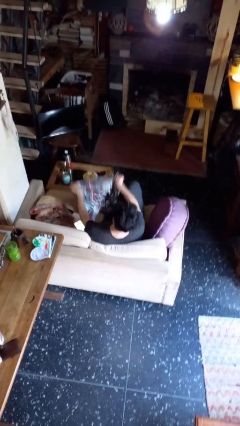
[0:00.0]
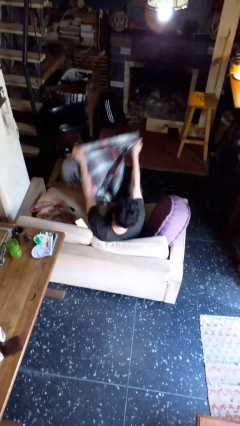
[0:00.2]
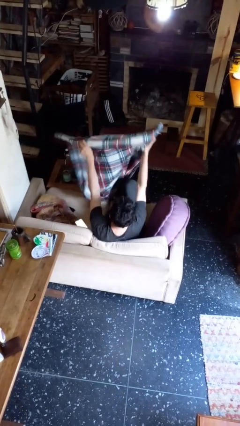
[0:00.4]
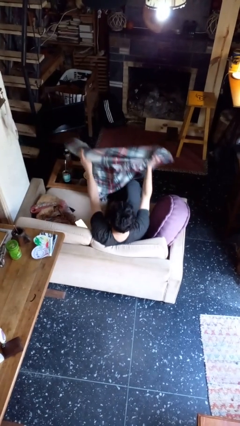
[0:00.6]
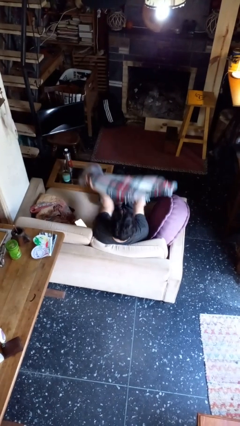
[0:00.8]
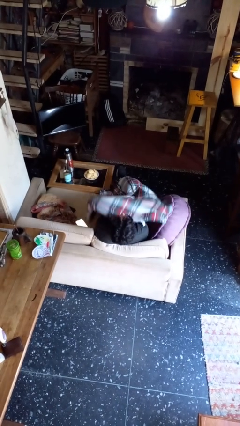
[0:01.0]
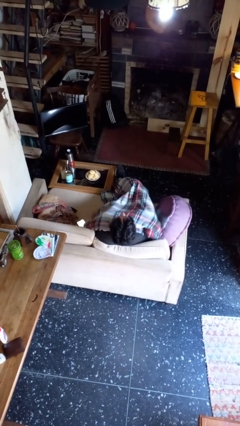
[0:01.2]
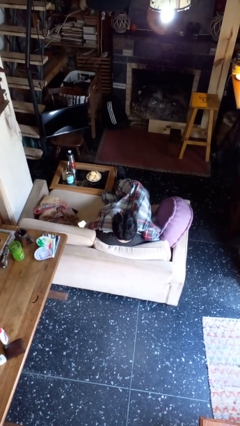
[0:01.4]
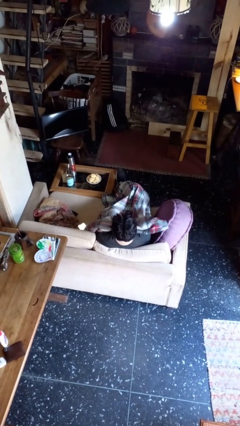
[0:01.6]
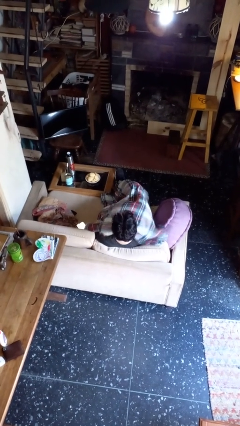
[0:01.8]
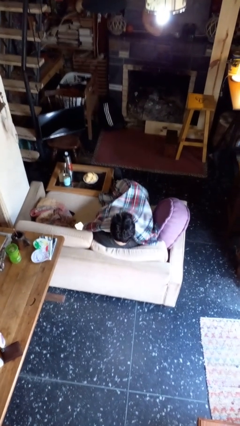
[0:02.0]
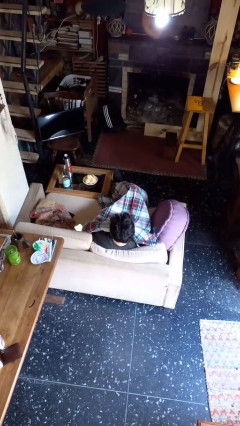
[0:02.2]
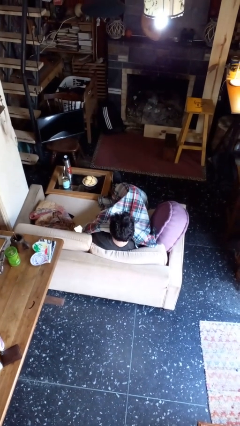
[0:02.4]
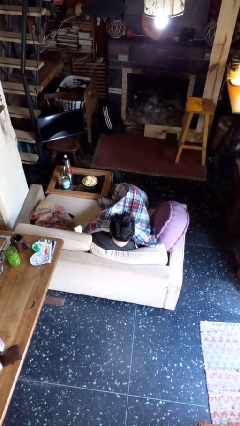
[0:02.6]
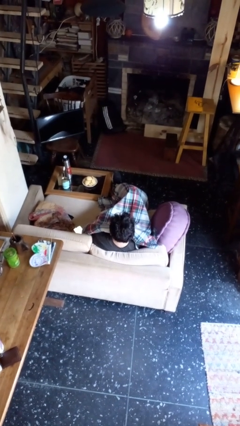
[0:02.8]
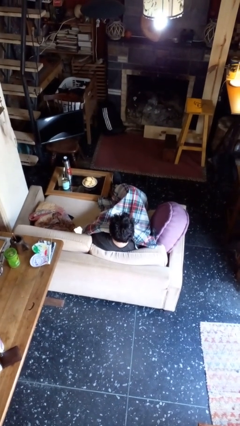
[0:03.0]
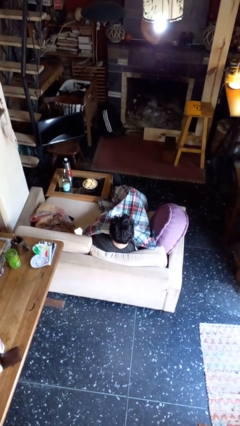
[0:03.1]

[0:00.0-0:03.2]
person covers with blanket

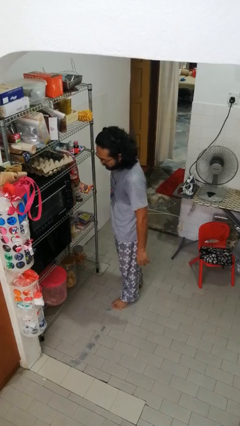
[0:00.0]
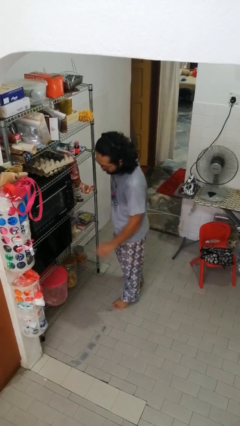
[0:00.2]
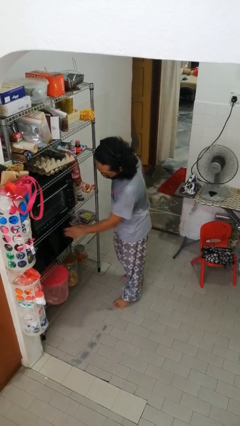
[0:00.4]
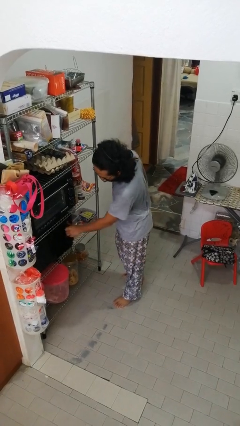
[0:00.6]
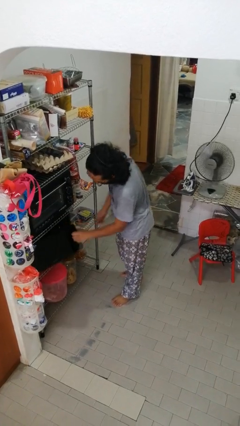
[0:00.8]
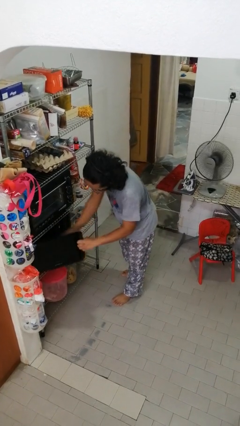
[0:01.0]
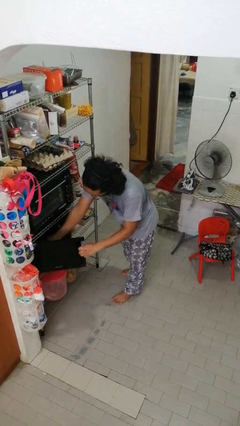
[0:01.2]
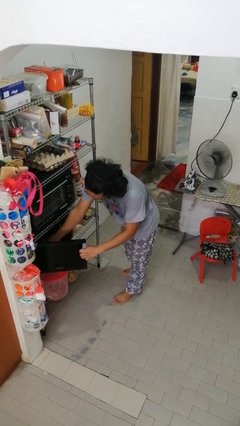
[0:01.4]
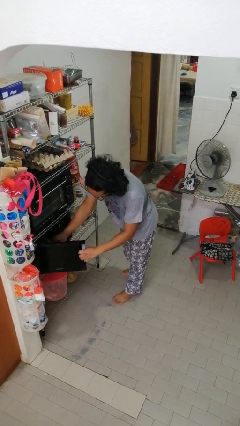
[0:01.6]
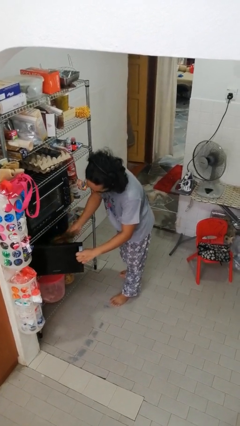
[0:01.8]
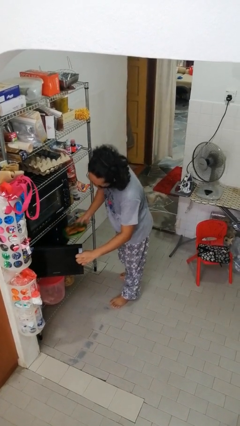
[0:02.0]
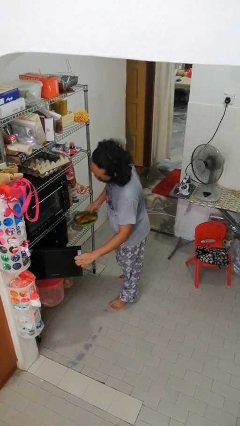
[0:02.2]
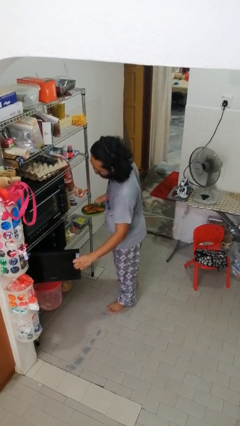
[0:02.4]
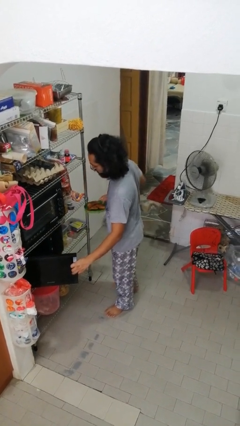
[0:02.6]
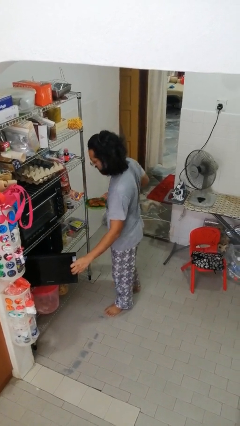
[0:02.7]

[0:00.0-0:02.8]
person takes object from microwave

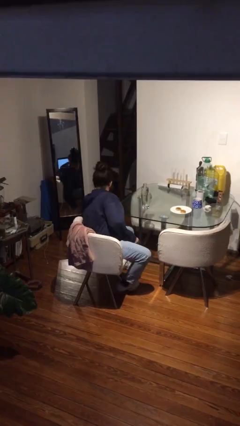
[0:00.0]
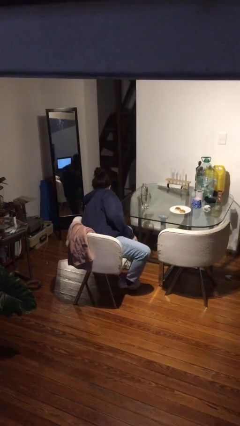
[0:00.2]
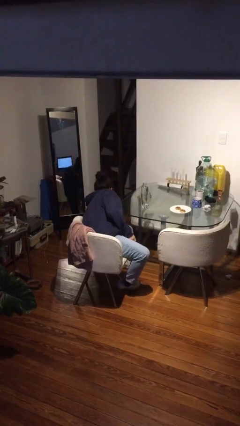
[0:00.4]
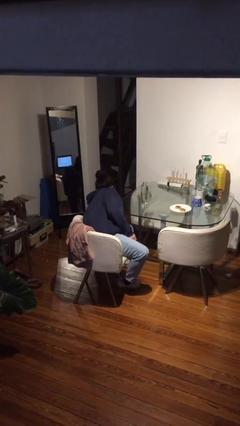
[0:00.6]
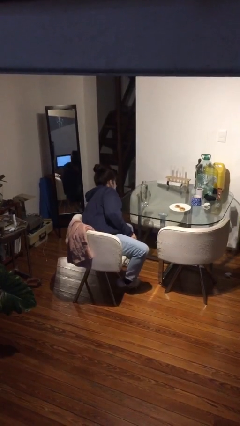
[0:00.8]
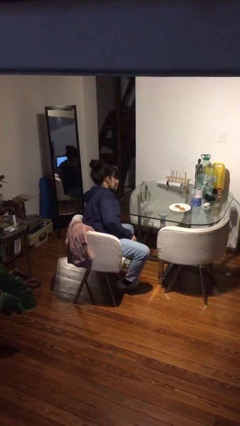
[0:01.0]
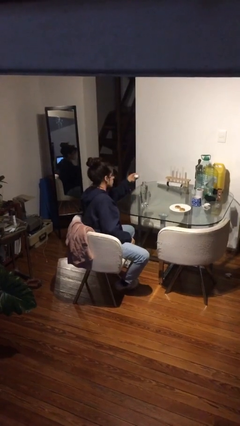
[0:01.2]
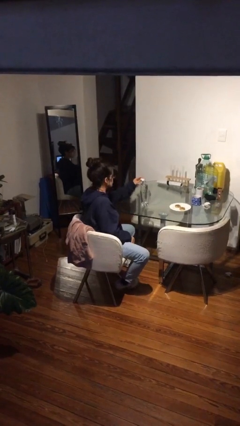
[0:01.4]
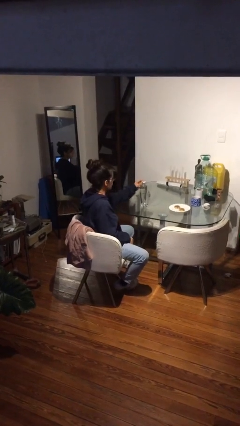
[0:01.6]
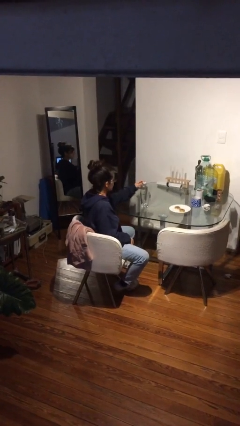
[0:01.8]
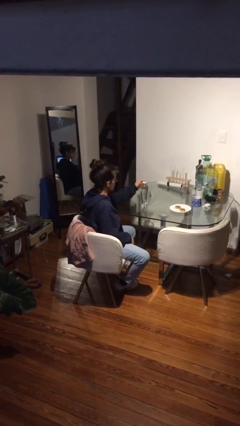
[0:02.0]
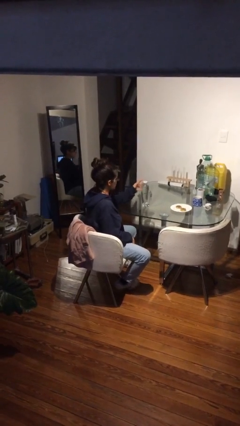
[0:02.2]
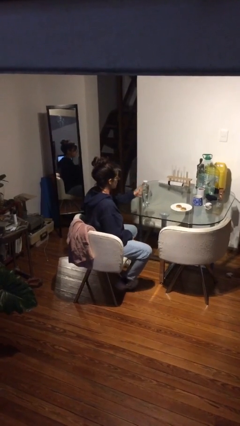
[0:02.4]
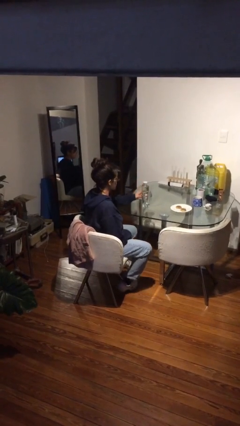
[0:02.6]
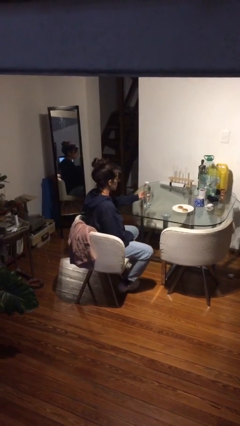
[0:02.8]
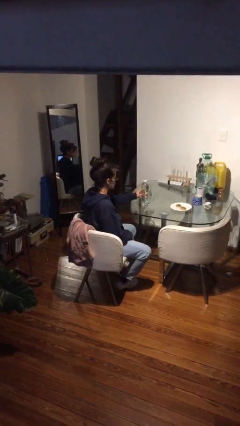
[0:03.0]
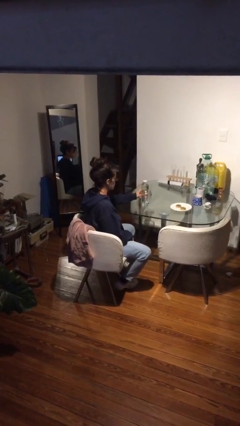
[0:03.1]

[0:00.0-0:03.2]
person screws lid to bottle

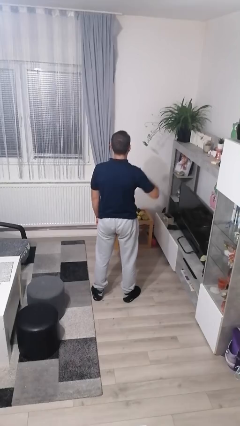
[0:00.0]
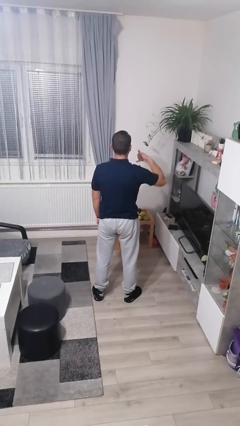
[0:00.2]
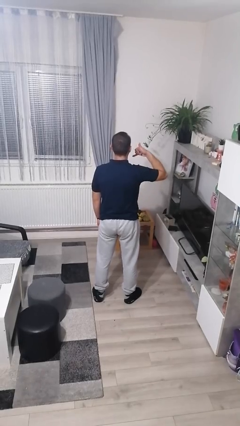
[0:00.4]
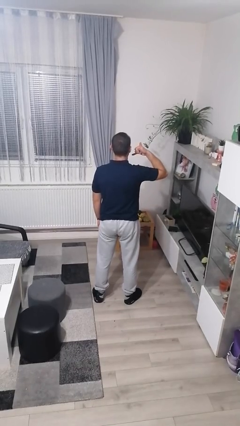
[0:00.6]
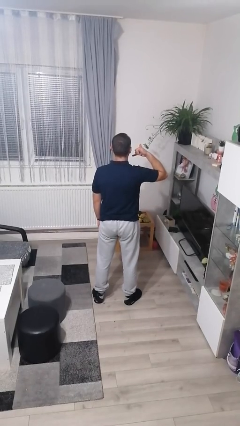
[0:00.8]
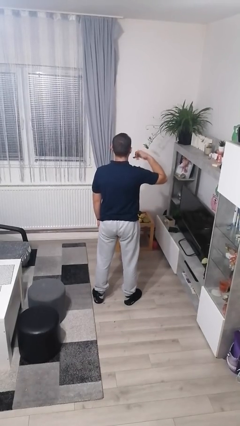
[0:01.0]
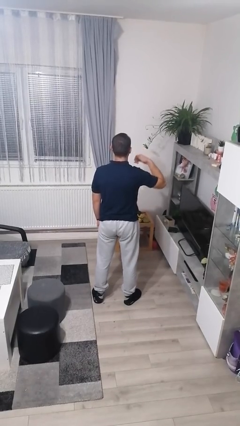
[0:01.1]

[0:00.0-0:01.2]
person gestures call me

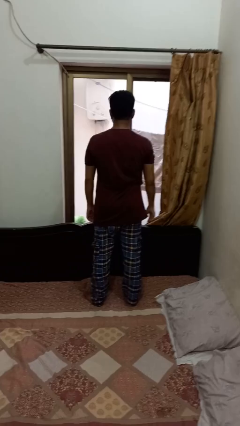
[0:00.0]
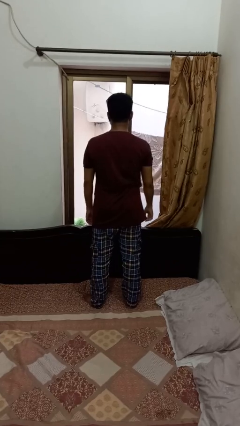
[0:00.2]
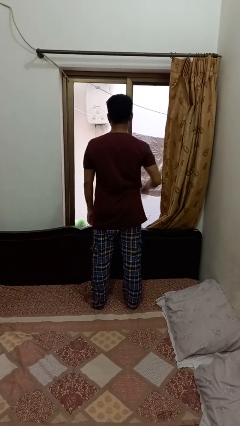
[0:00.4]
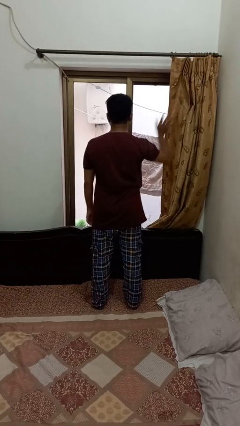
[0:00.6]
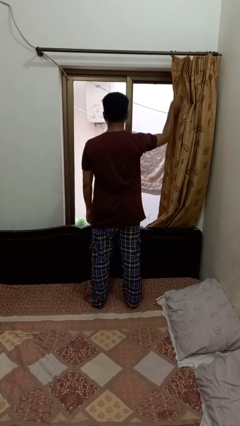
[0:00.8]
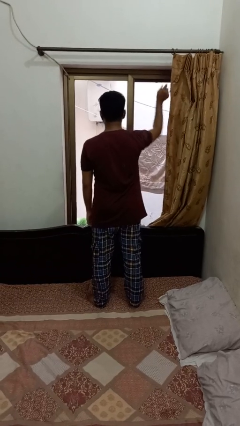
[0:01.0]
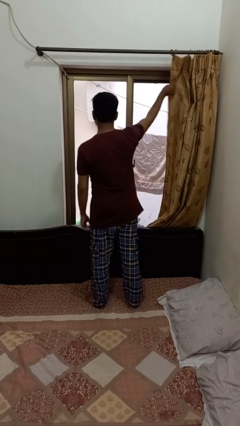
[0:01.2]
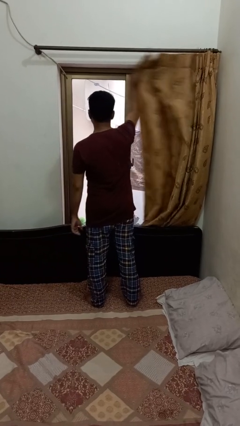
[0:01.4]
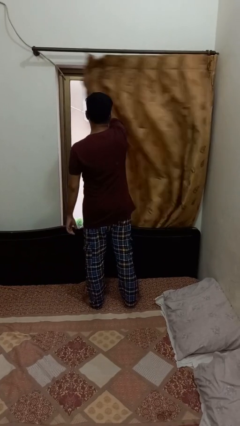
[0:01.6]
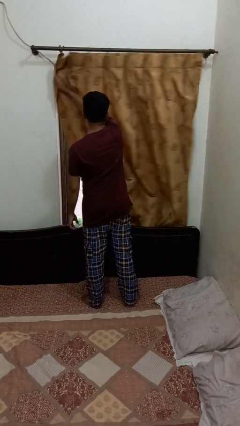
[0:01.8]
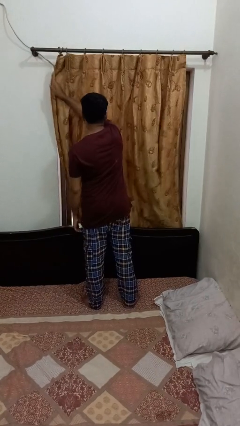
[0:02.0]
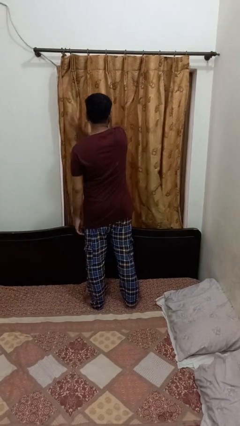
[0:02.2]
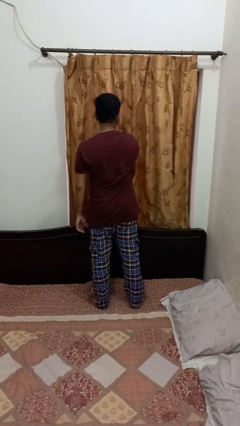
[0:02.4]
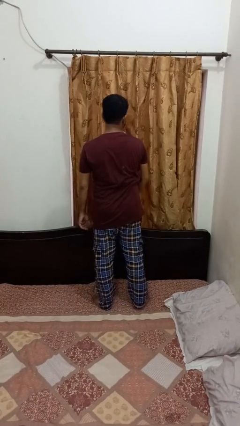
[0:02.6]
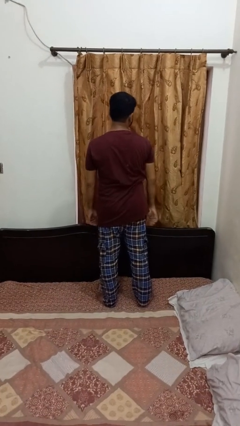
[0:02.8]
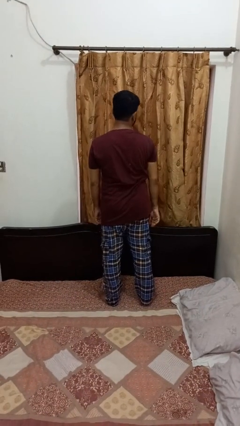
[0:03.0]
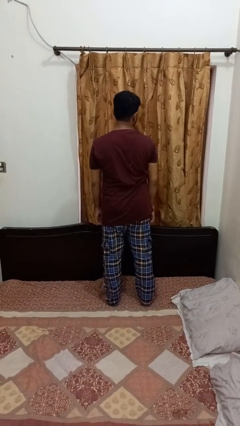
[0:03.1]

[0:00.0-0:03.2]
person closes curtains

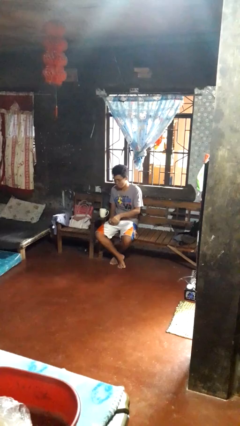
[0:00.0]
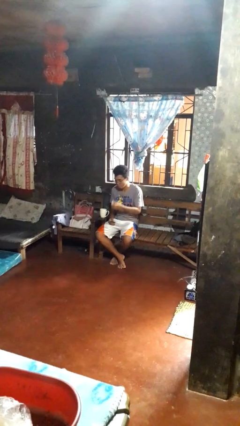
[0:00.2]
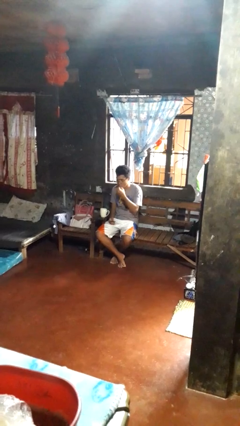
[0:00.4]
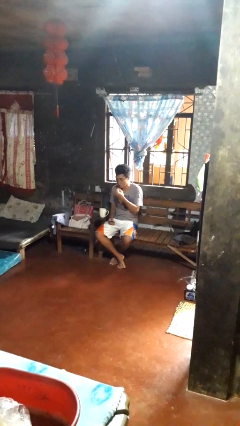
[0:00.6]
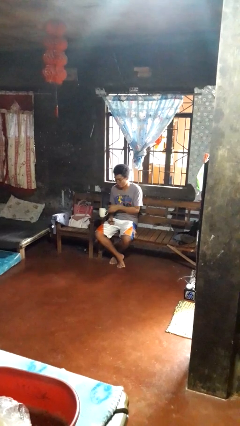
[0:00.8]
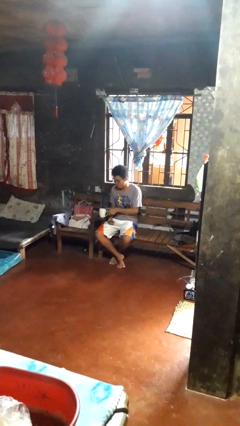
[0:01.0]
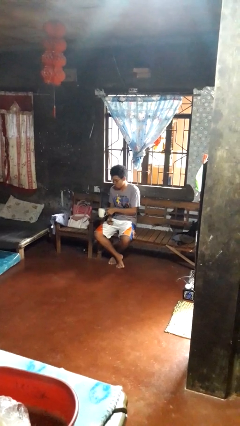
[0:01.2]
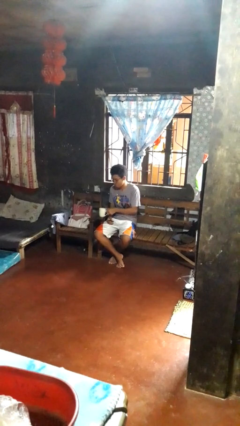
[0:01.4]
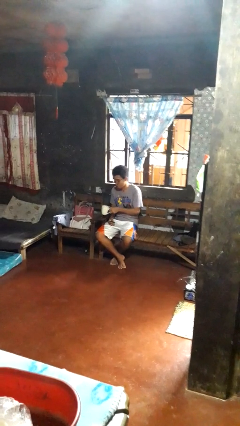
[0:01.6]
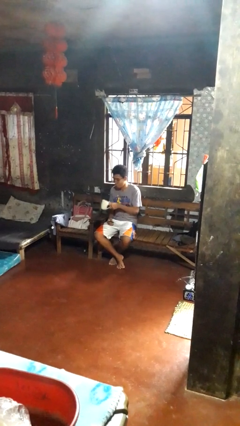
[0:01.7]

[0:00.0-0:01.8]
person takes medicine pills

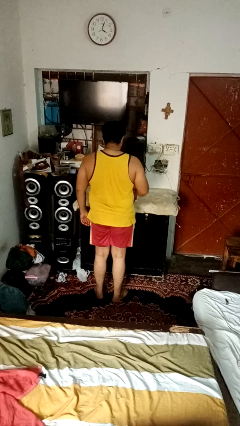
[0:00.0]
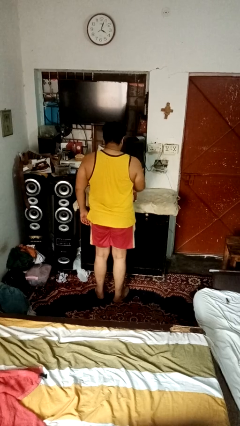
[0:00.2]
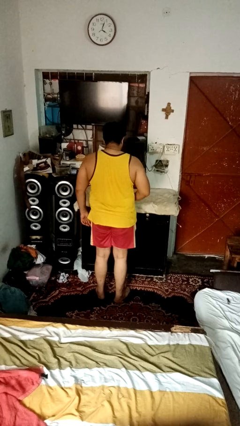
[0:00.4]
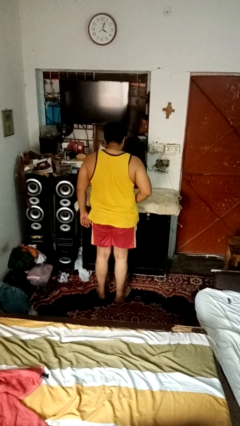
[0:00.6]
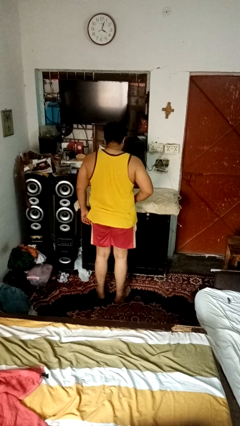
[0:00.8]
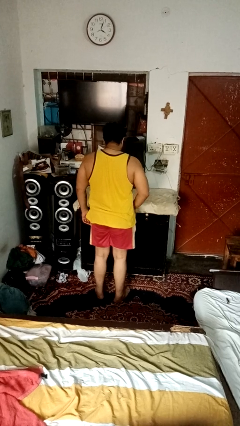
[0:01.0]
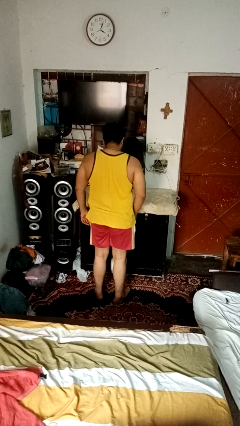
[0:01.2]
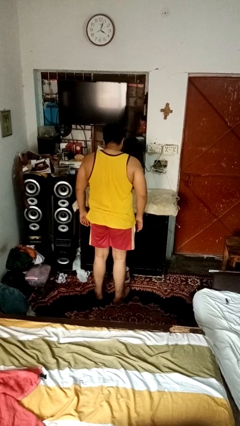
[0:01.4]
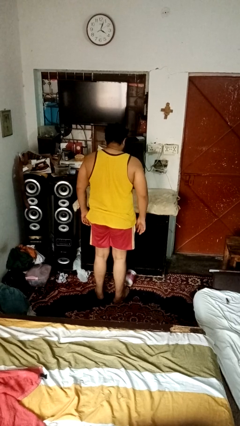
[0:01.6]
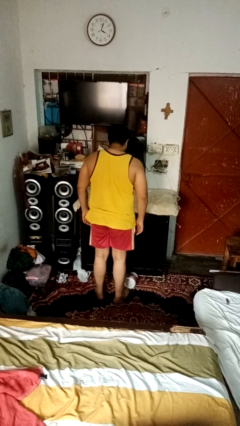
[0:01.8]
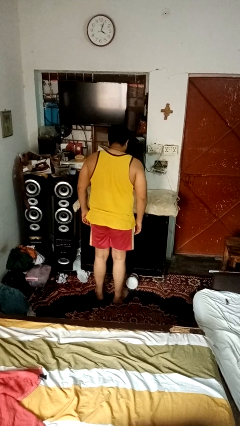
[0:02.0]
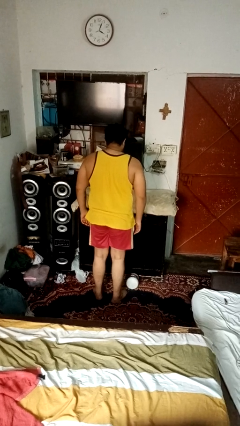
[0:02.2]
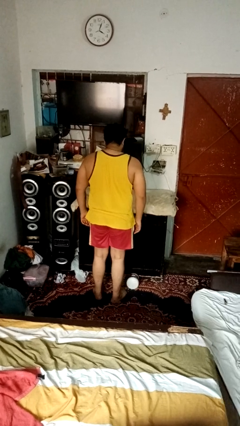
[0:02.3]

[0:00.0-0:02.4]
person knocks over furniture
